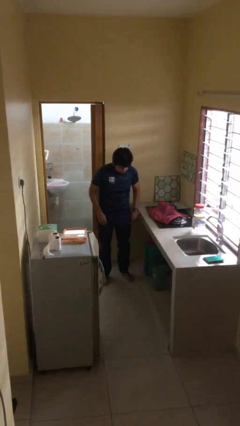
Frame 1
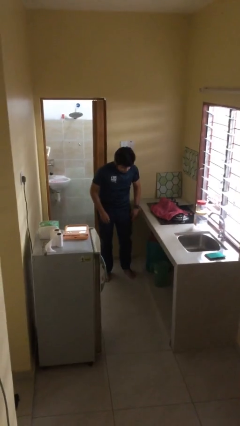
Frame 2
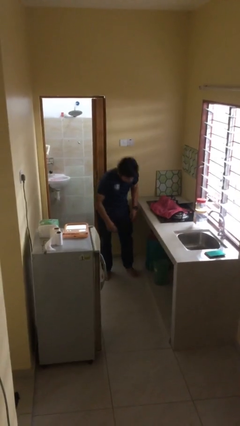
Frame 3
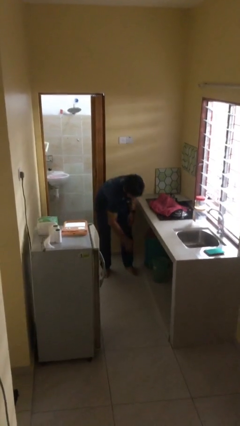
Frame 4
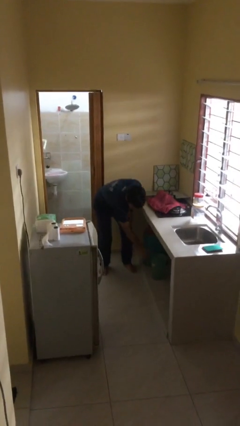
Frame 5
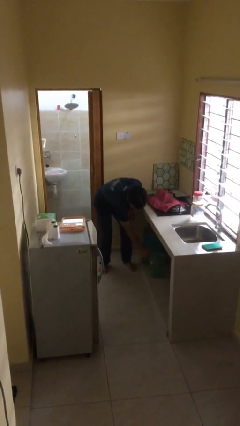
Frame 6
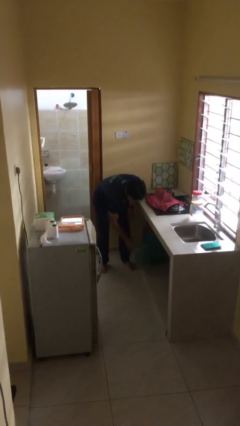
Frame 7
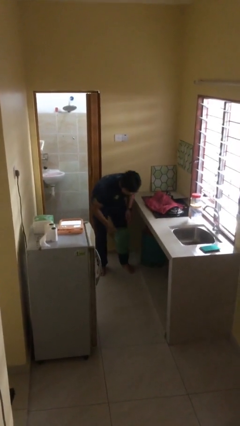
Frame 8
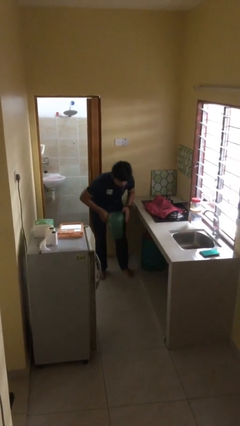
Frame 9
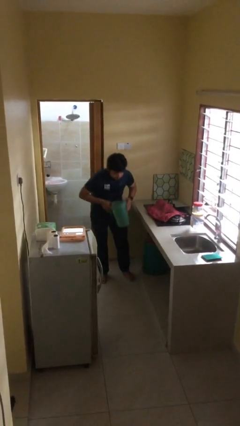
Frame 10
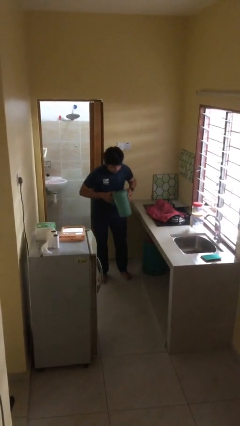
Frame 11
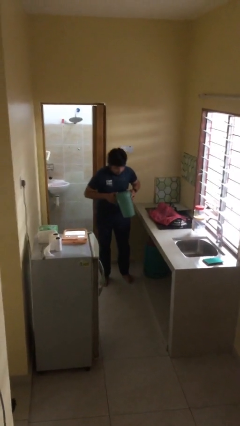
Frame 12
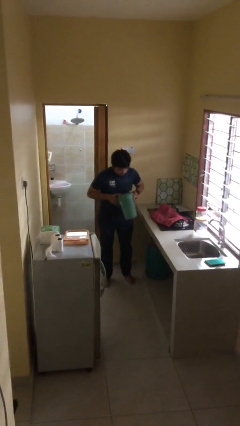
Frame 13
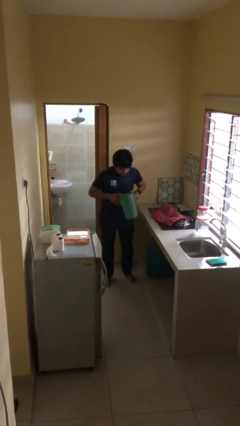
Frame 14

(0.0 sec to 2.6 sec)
person picks up object from cabinet

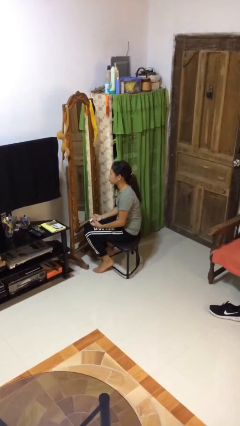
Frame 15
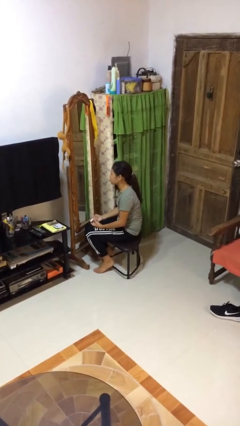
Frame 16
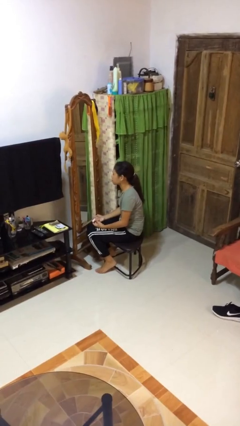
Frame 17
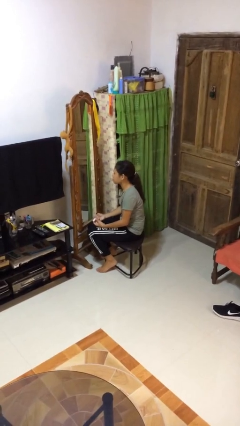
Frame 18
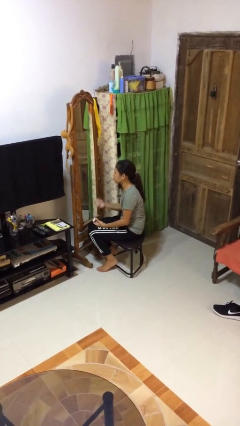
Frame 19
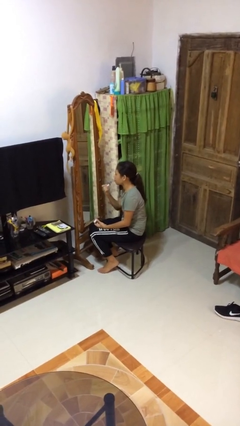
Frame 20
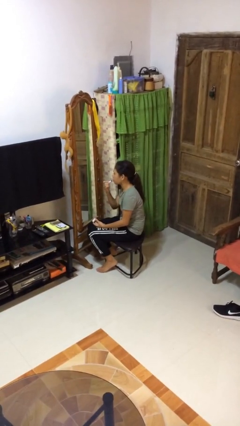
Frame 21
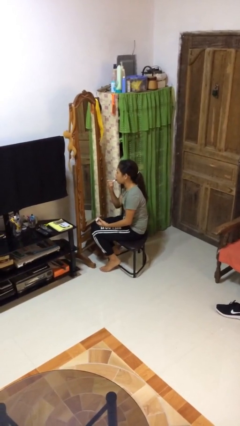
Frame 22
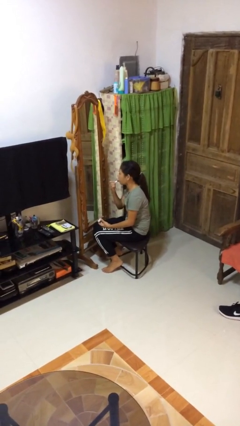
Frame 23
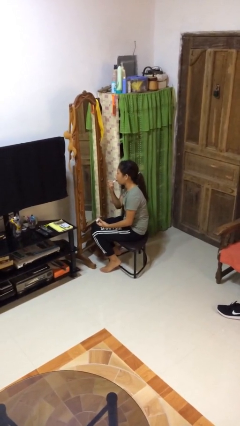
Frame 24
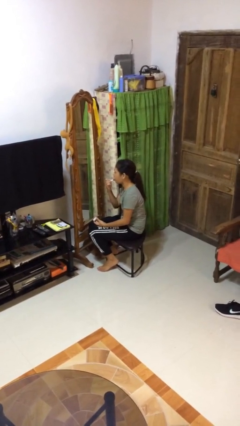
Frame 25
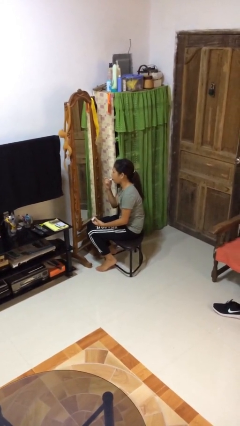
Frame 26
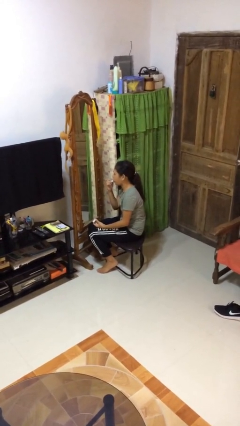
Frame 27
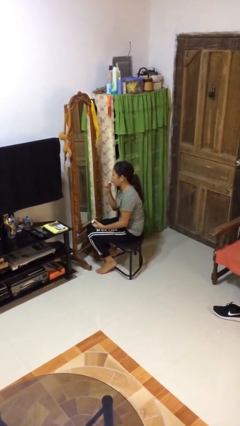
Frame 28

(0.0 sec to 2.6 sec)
person applies lip makeup

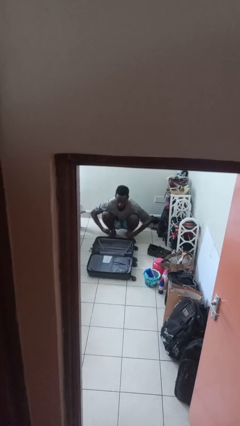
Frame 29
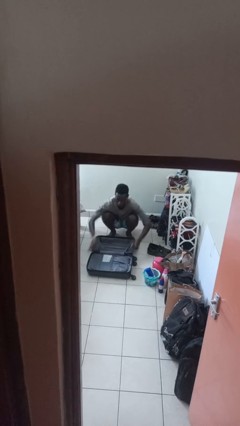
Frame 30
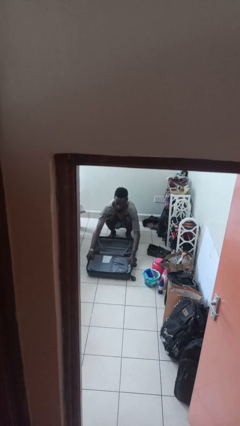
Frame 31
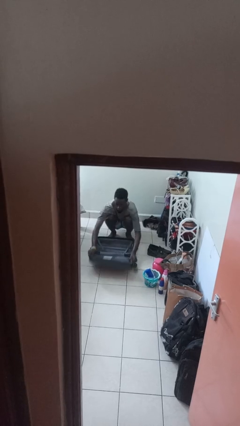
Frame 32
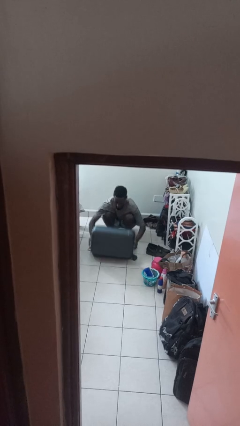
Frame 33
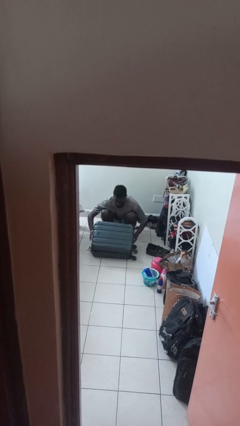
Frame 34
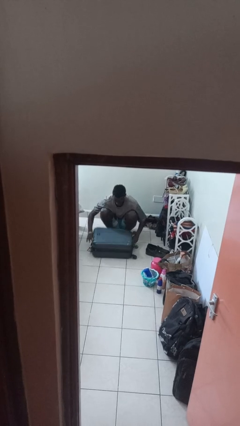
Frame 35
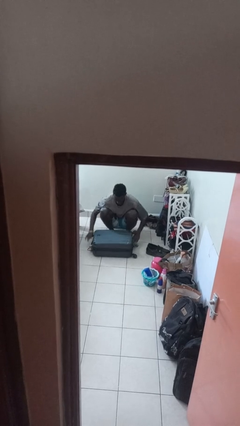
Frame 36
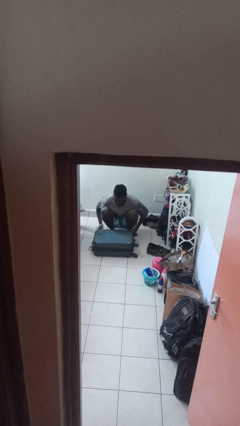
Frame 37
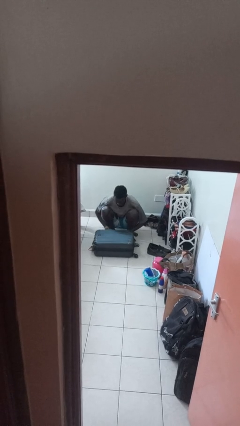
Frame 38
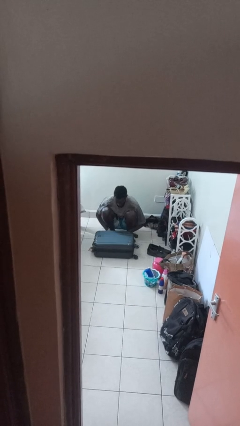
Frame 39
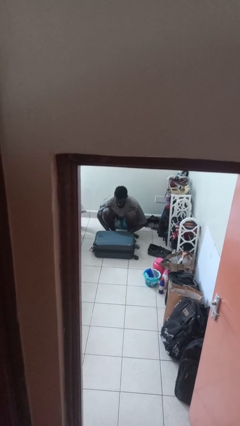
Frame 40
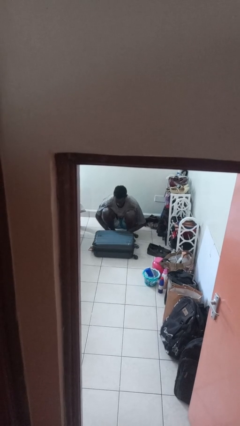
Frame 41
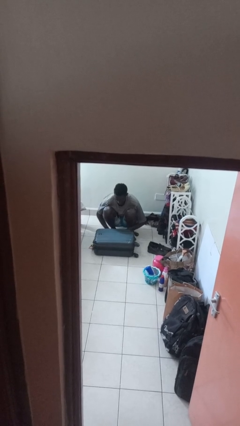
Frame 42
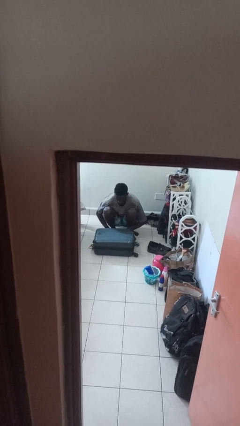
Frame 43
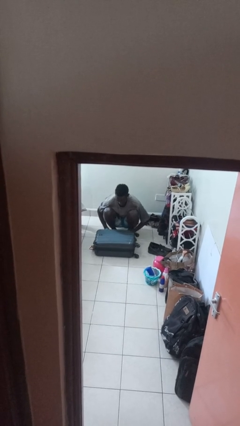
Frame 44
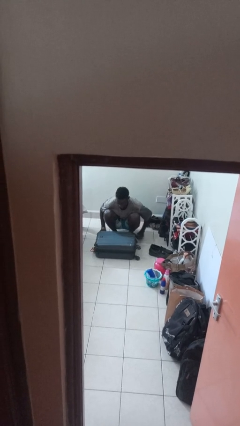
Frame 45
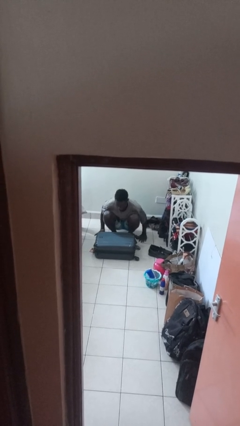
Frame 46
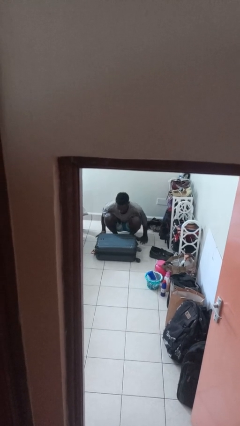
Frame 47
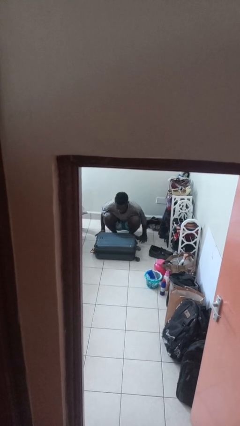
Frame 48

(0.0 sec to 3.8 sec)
person closes suitcase

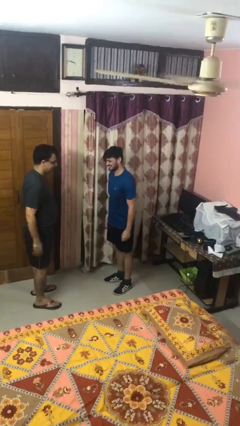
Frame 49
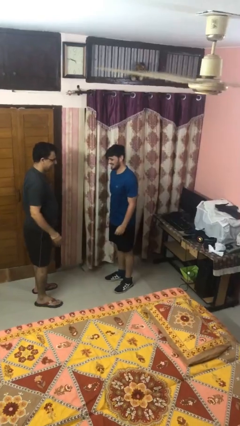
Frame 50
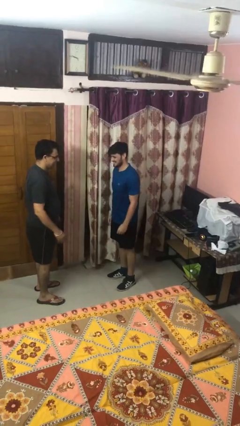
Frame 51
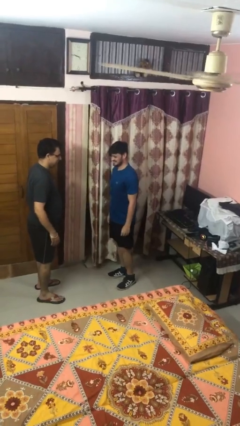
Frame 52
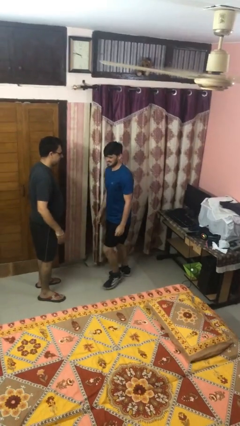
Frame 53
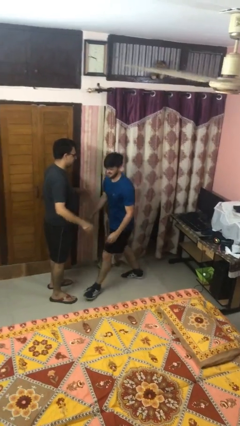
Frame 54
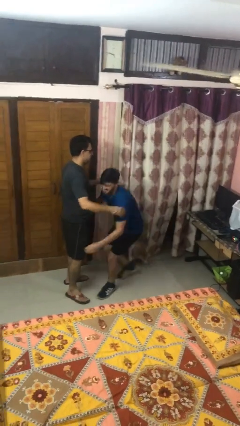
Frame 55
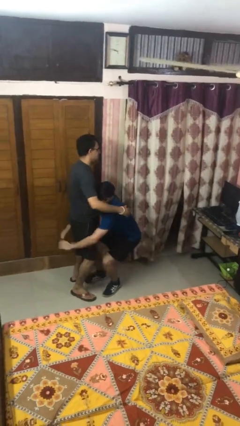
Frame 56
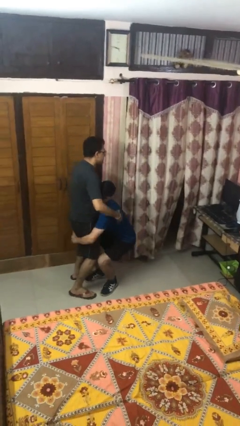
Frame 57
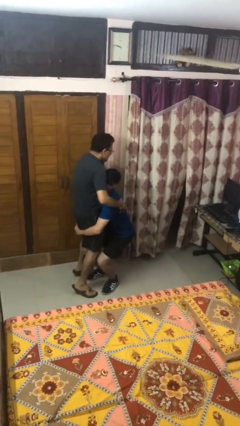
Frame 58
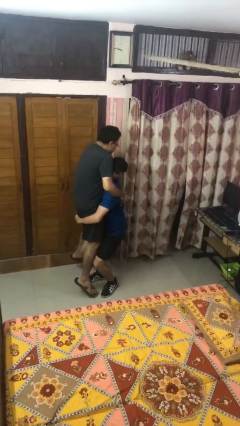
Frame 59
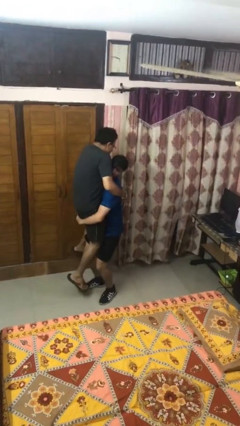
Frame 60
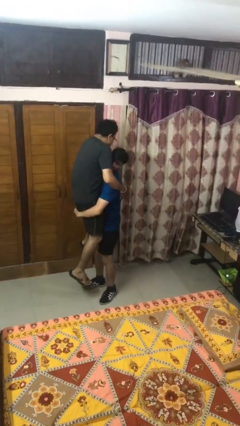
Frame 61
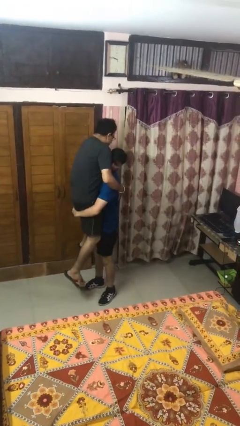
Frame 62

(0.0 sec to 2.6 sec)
person picks up person

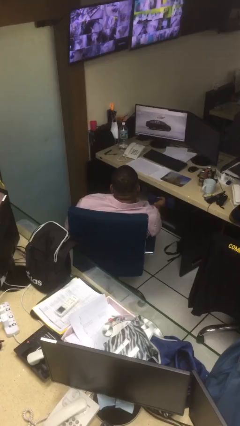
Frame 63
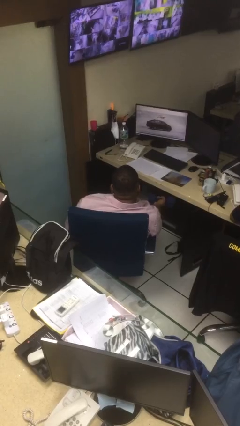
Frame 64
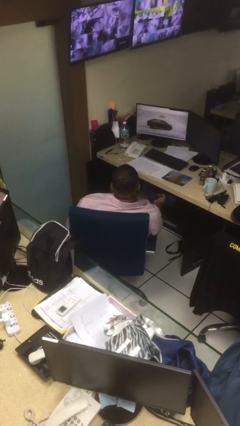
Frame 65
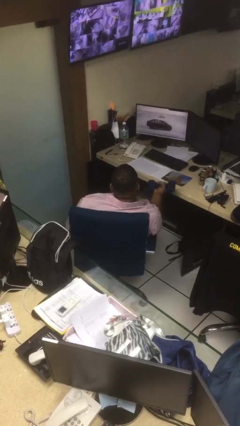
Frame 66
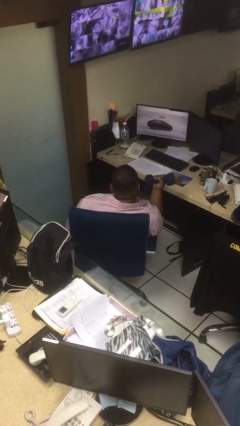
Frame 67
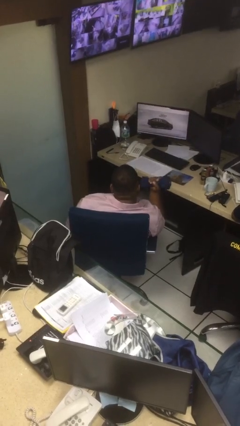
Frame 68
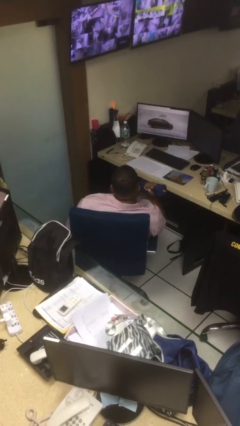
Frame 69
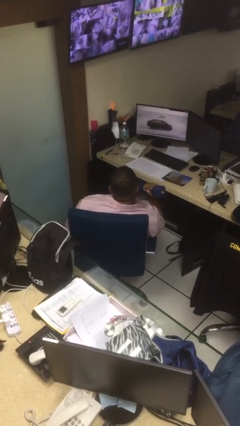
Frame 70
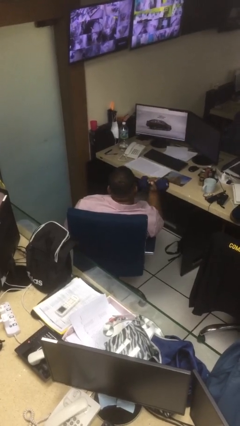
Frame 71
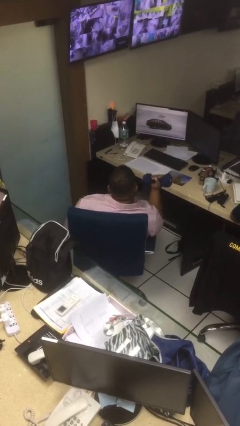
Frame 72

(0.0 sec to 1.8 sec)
person lifts dumbbells

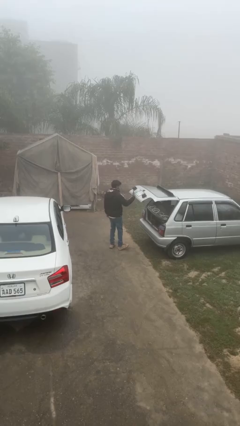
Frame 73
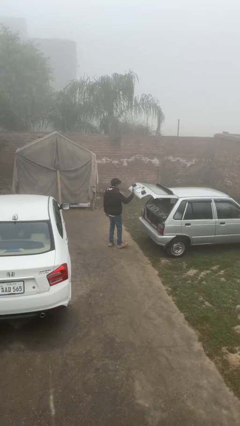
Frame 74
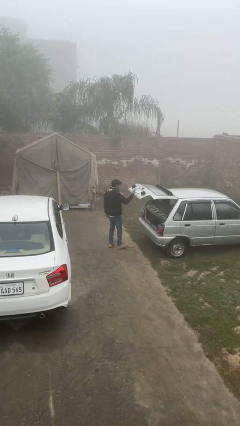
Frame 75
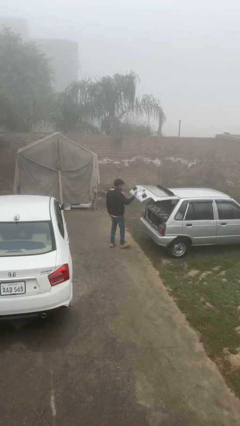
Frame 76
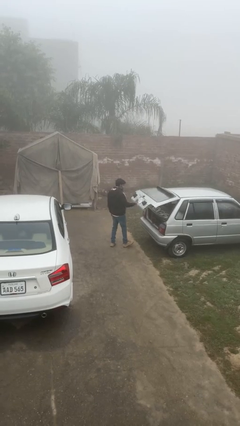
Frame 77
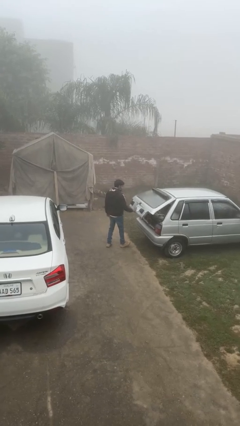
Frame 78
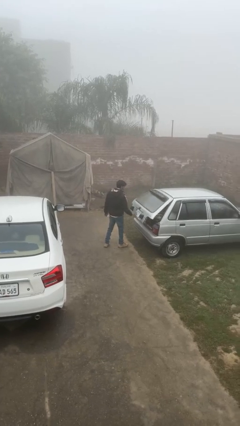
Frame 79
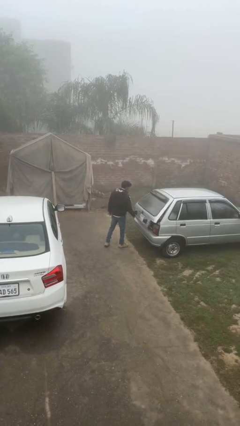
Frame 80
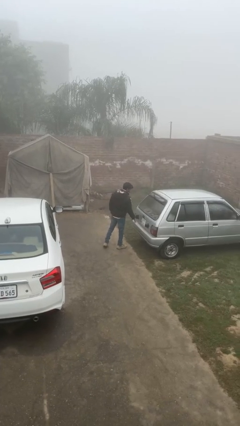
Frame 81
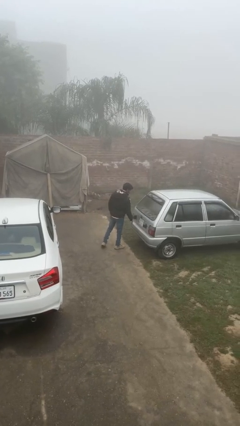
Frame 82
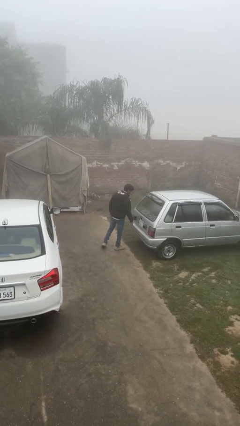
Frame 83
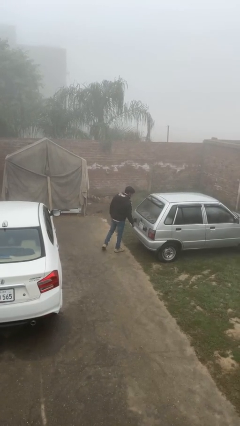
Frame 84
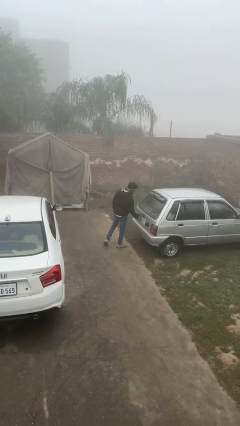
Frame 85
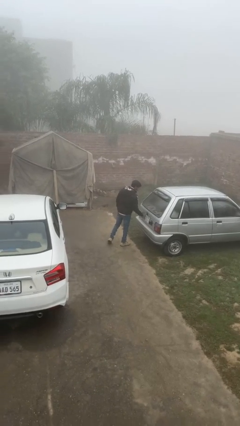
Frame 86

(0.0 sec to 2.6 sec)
person closes car trunk

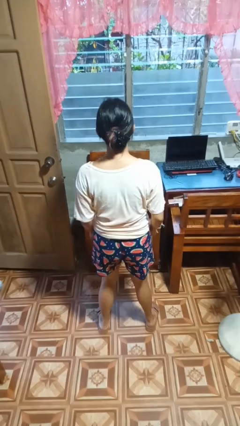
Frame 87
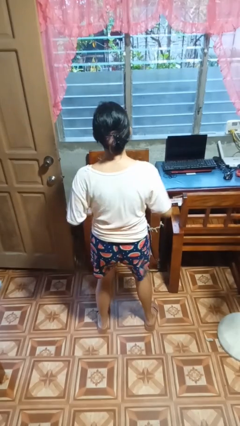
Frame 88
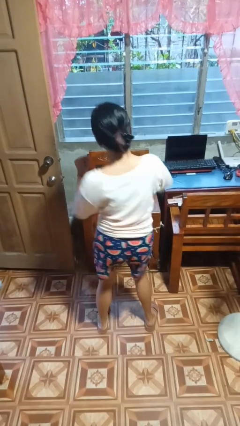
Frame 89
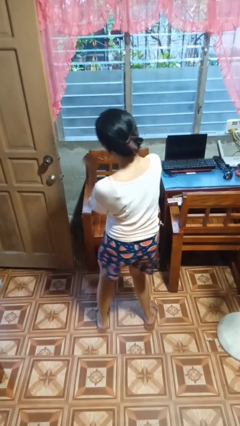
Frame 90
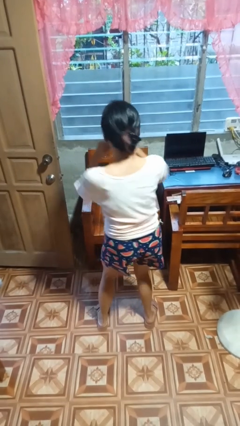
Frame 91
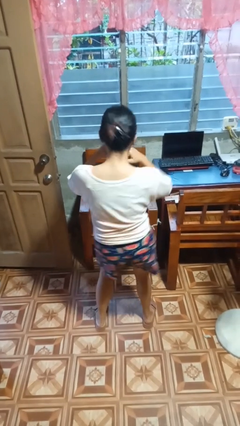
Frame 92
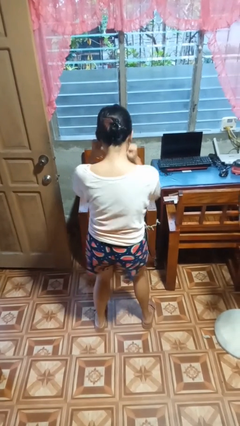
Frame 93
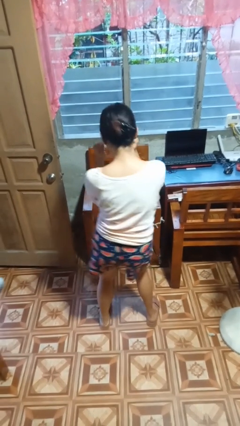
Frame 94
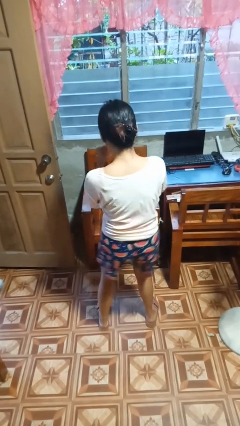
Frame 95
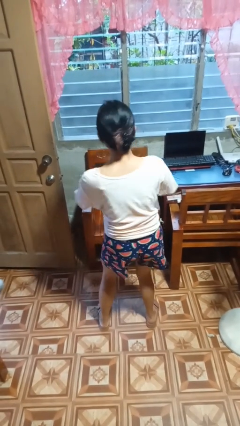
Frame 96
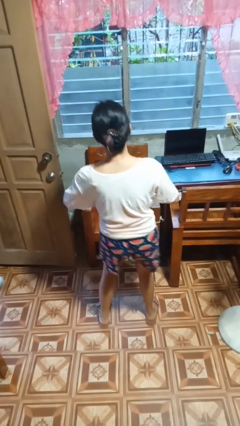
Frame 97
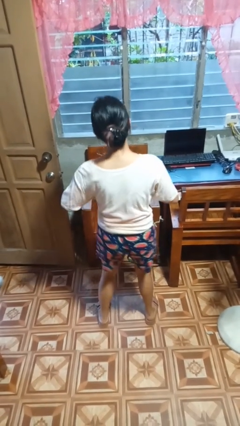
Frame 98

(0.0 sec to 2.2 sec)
person dances in place
